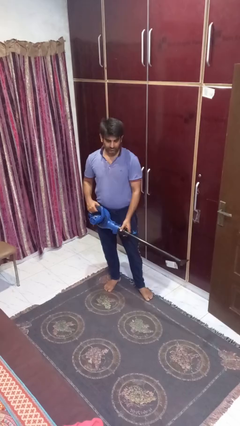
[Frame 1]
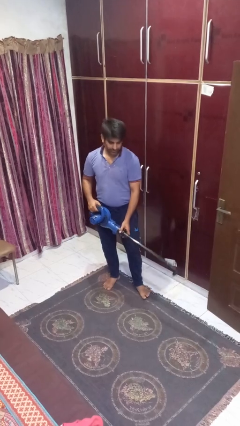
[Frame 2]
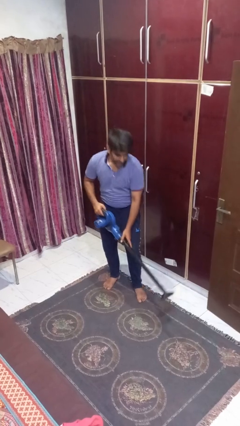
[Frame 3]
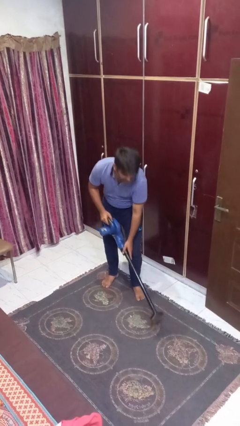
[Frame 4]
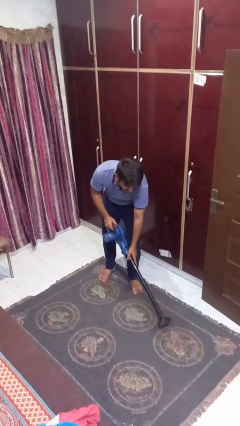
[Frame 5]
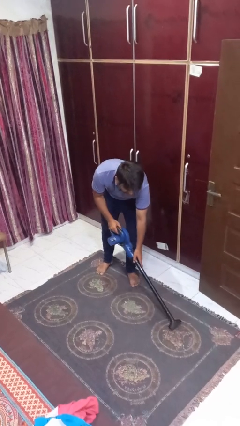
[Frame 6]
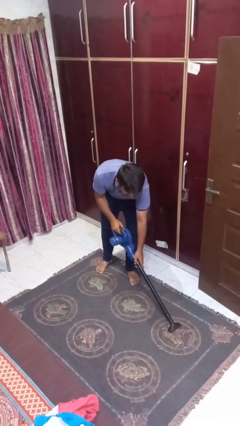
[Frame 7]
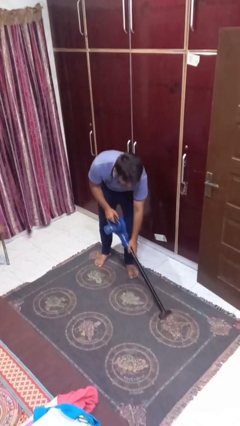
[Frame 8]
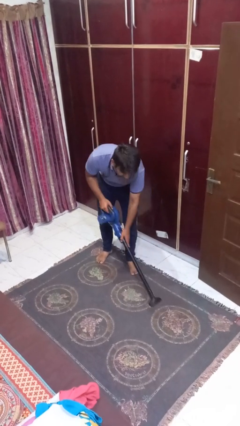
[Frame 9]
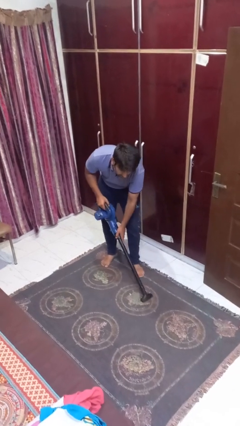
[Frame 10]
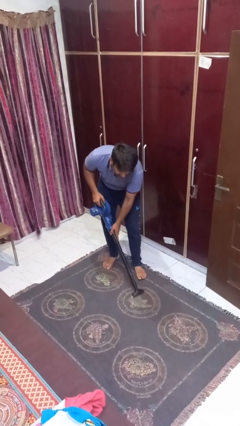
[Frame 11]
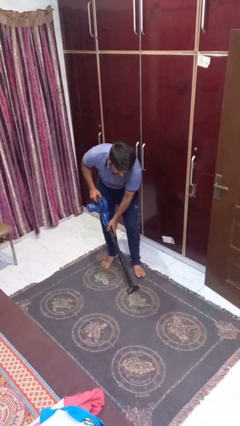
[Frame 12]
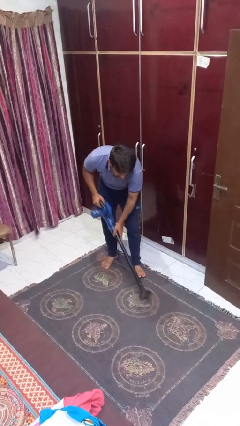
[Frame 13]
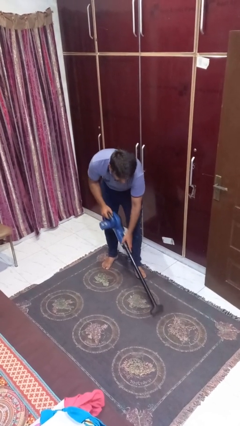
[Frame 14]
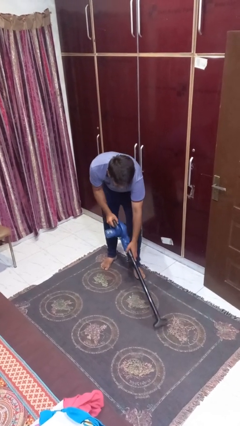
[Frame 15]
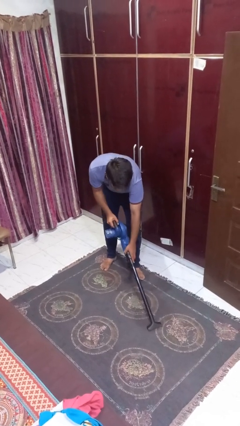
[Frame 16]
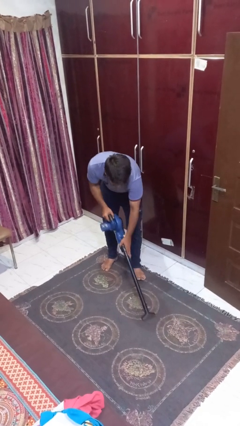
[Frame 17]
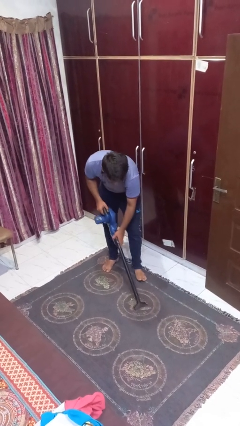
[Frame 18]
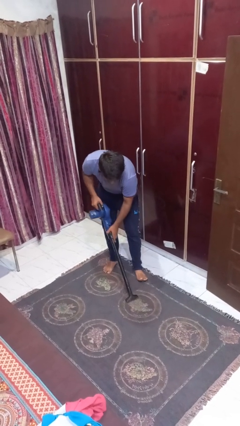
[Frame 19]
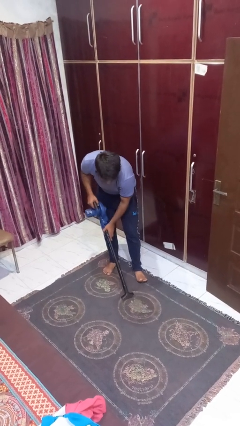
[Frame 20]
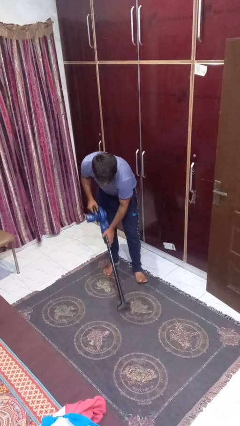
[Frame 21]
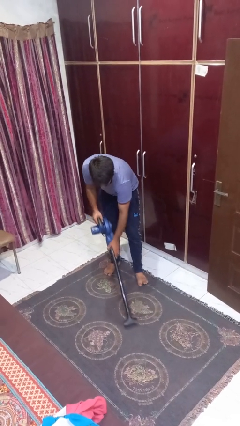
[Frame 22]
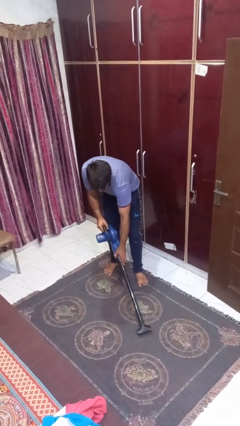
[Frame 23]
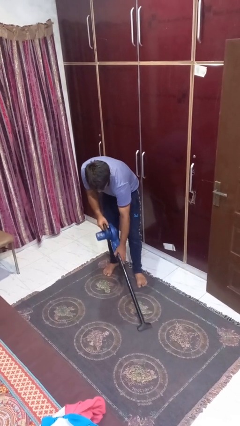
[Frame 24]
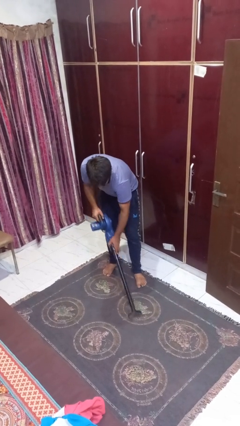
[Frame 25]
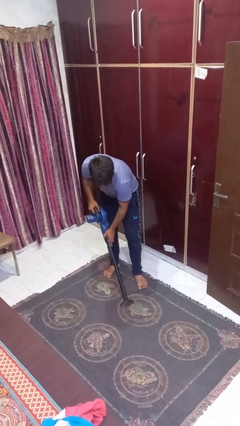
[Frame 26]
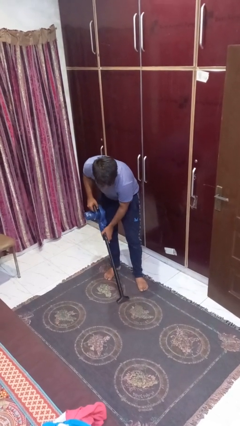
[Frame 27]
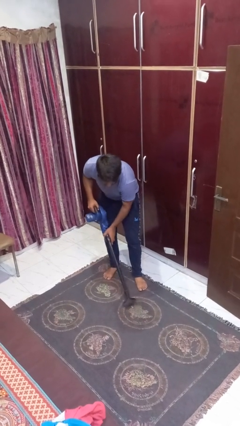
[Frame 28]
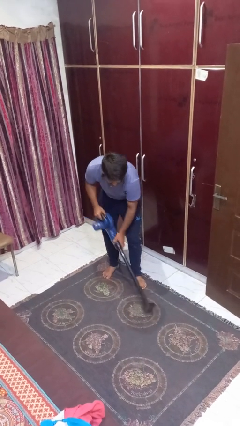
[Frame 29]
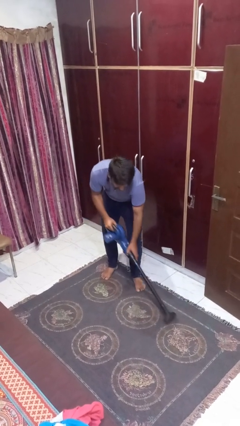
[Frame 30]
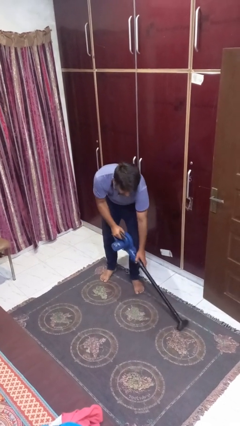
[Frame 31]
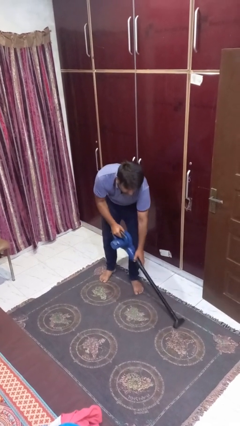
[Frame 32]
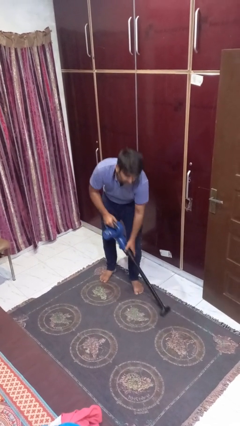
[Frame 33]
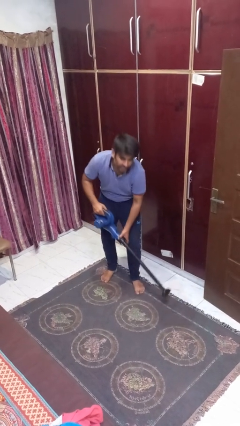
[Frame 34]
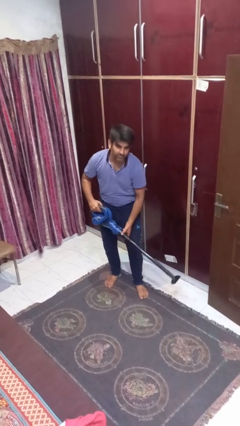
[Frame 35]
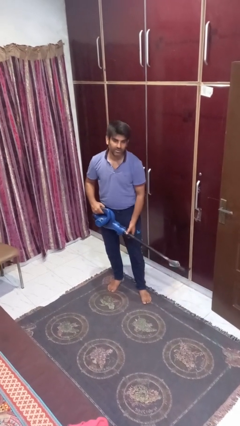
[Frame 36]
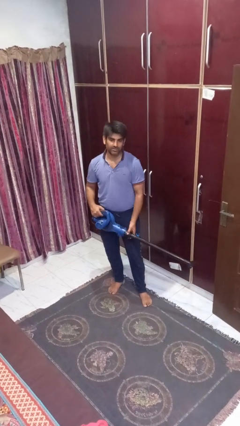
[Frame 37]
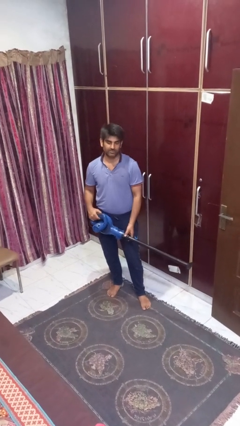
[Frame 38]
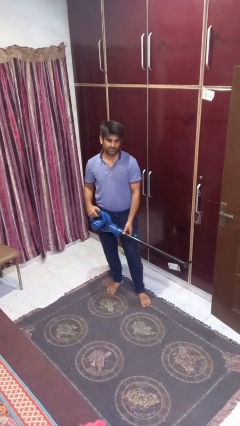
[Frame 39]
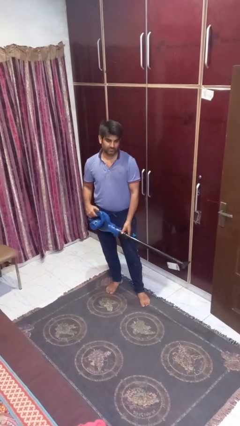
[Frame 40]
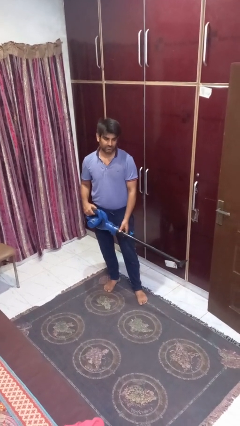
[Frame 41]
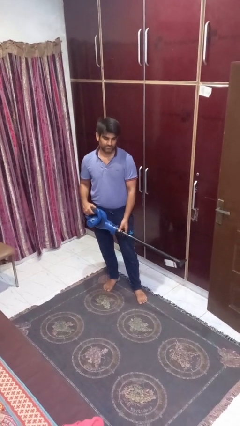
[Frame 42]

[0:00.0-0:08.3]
person vacuums carpet

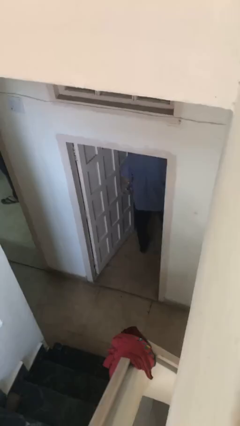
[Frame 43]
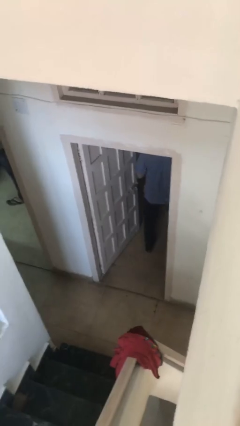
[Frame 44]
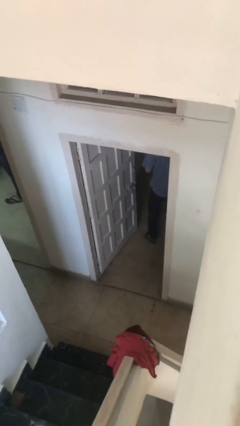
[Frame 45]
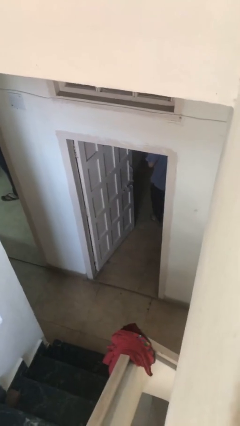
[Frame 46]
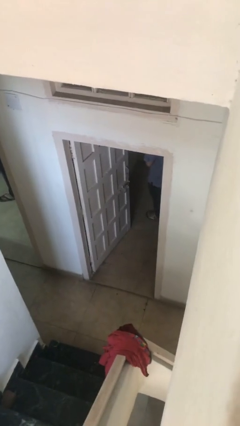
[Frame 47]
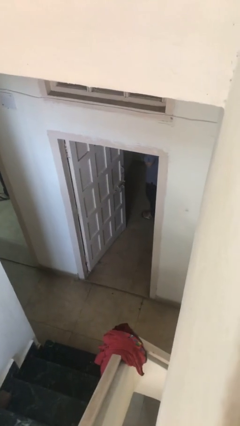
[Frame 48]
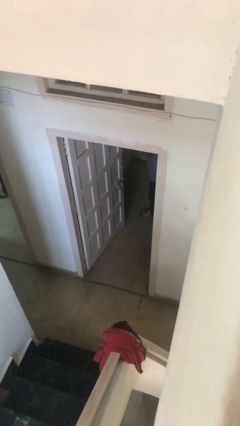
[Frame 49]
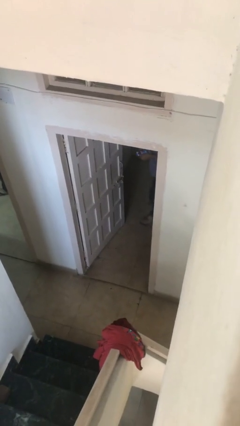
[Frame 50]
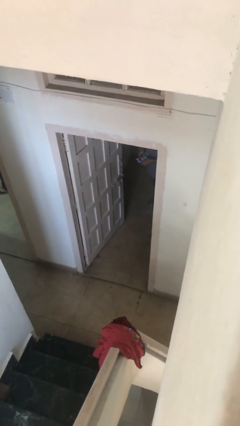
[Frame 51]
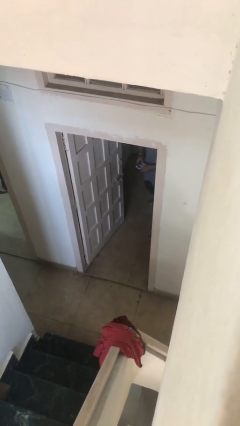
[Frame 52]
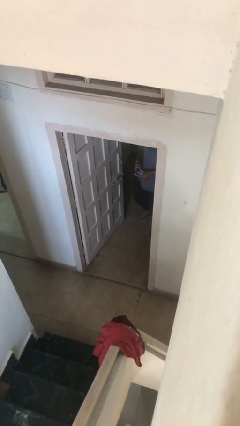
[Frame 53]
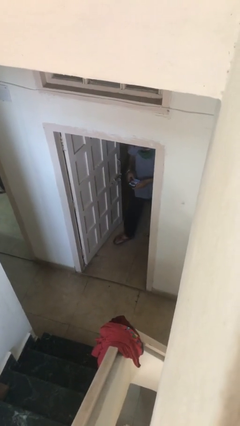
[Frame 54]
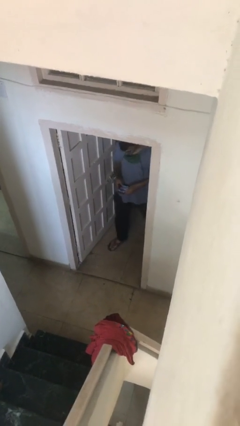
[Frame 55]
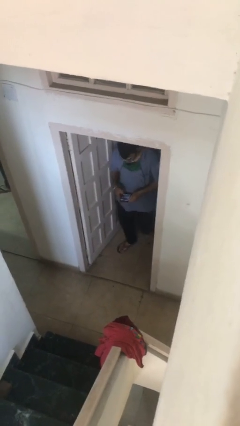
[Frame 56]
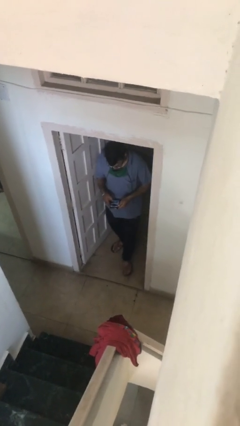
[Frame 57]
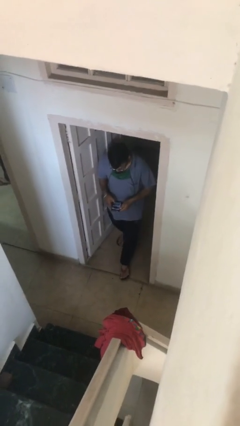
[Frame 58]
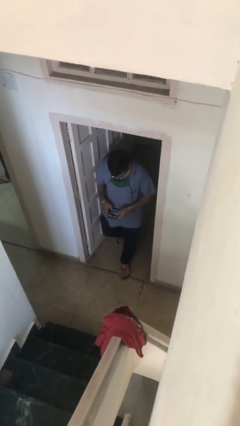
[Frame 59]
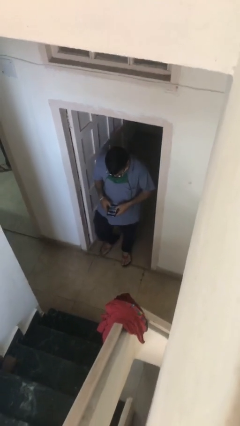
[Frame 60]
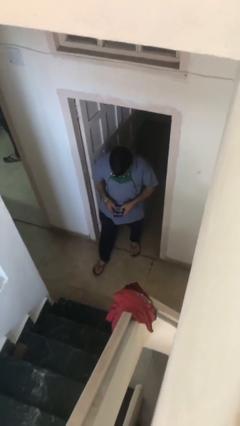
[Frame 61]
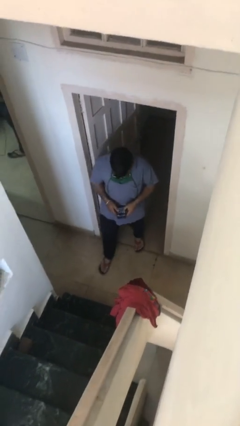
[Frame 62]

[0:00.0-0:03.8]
person enters scene through structure

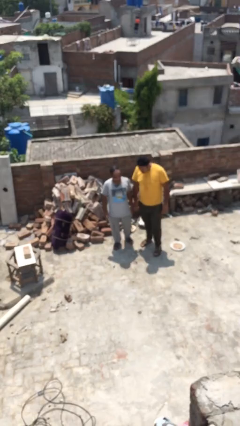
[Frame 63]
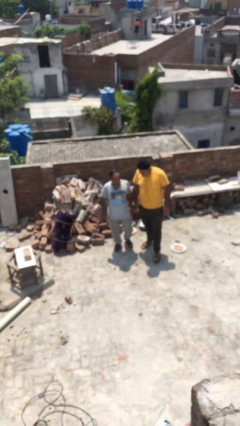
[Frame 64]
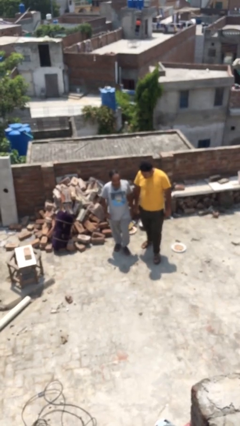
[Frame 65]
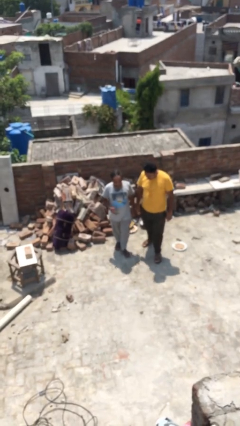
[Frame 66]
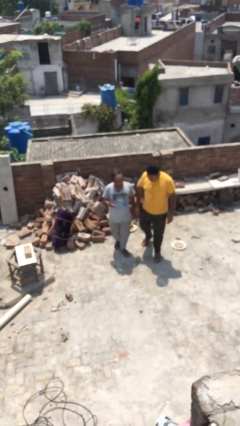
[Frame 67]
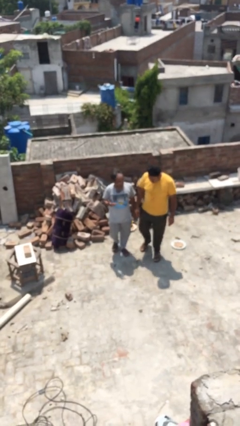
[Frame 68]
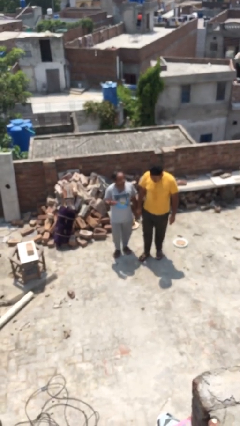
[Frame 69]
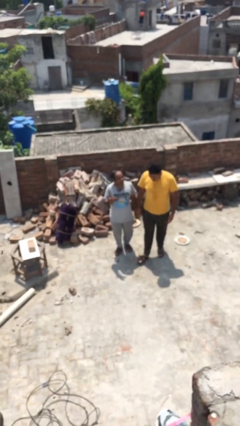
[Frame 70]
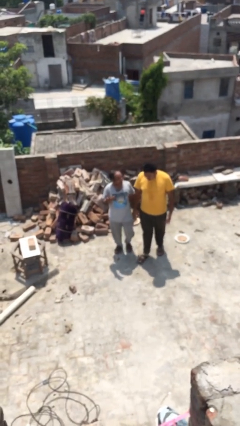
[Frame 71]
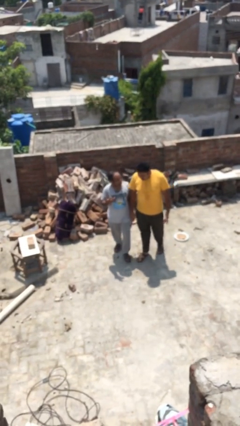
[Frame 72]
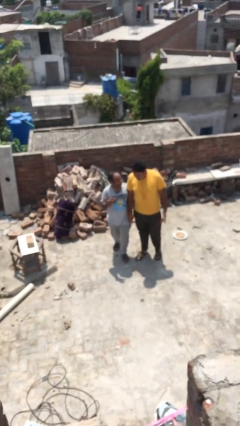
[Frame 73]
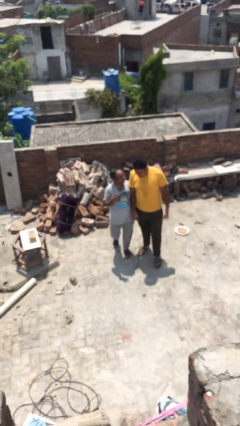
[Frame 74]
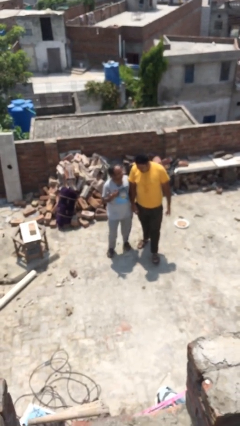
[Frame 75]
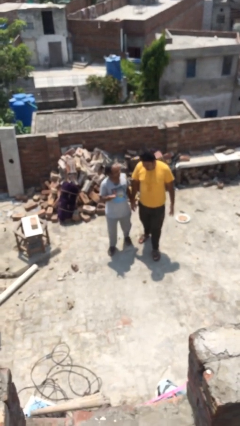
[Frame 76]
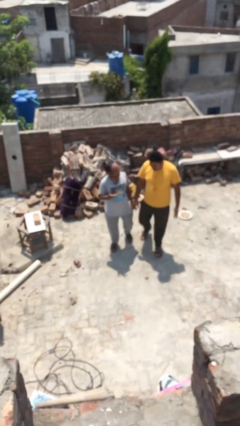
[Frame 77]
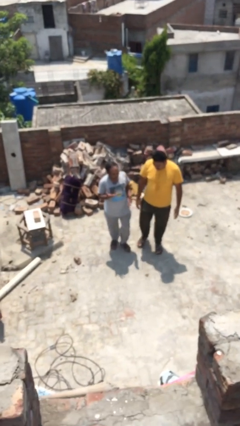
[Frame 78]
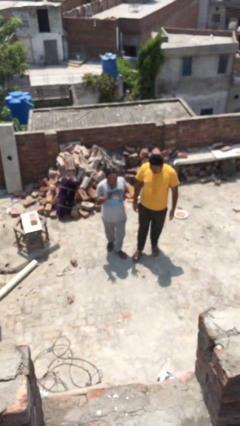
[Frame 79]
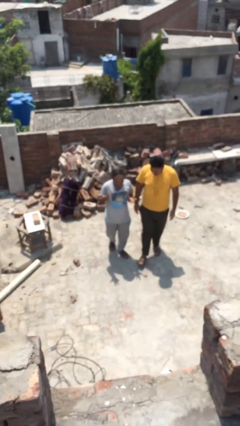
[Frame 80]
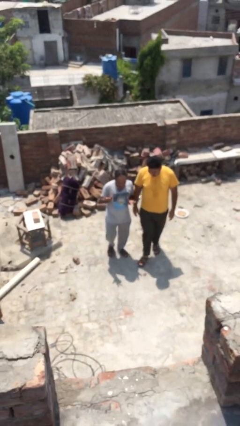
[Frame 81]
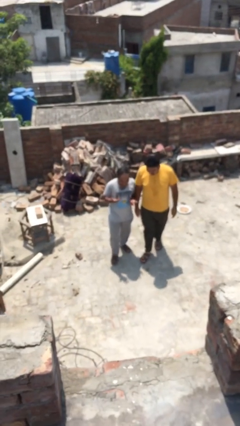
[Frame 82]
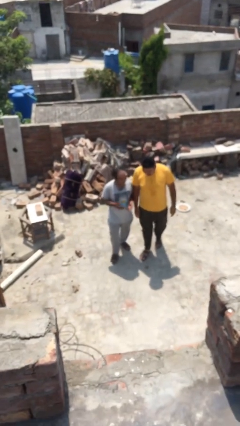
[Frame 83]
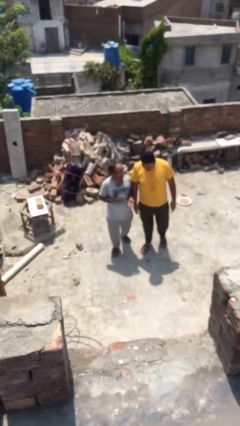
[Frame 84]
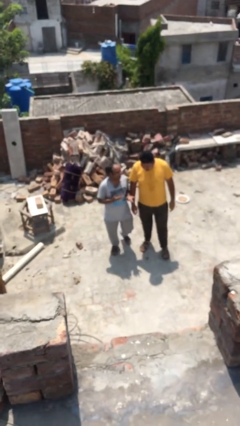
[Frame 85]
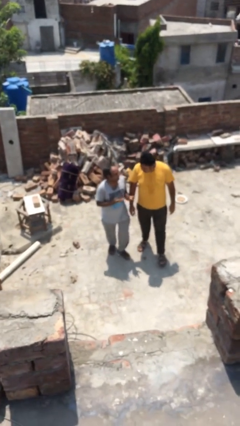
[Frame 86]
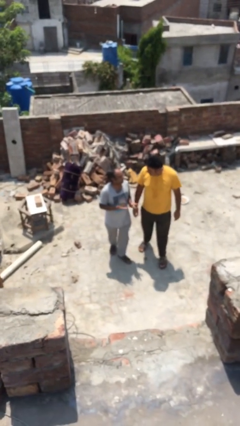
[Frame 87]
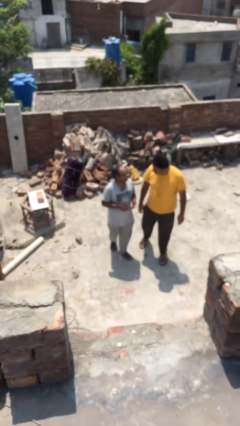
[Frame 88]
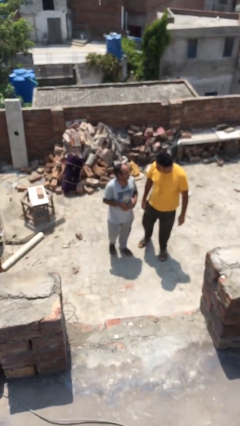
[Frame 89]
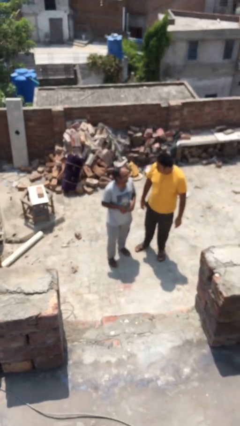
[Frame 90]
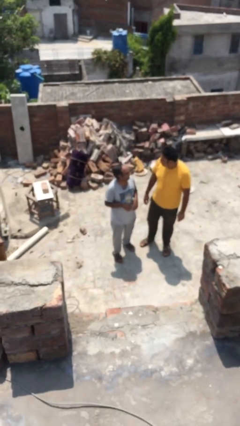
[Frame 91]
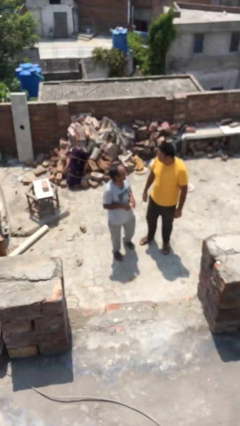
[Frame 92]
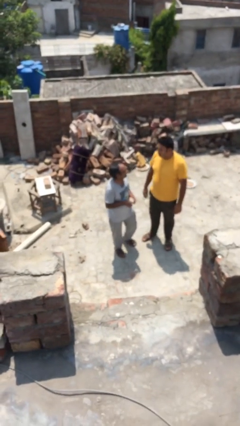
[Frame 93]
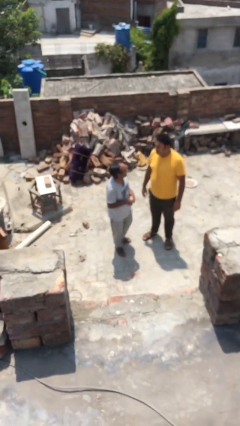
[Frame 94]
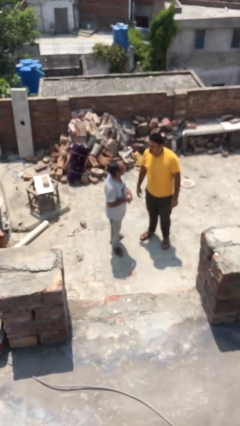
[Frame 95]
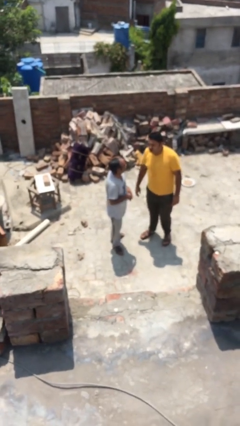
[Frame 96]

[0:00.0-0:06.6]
person talks to person
